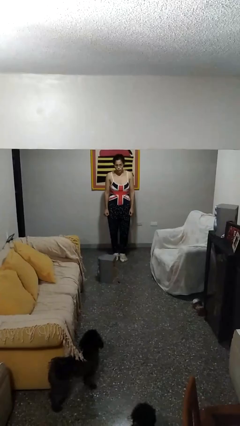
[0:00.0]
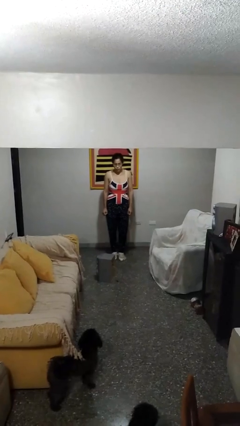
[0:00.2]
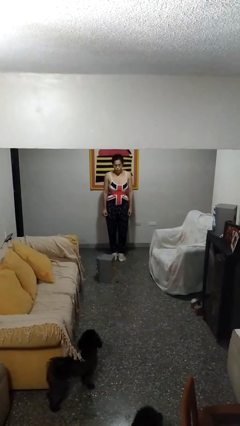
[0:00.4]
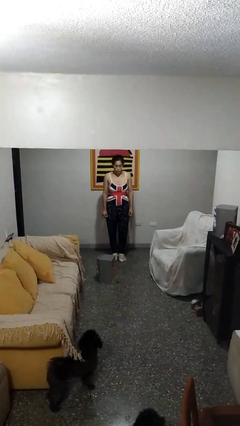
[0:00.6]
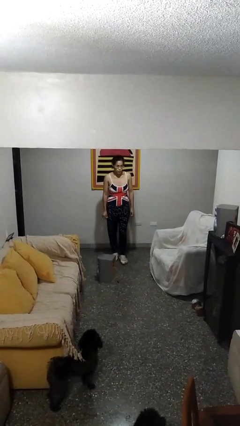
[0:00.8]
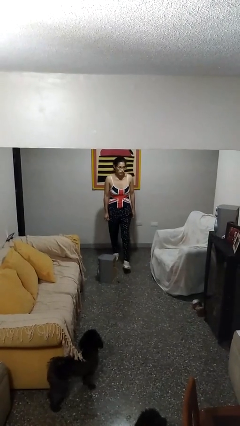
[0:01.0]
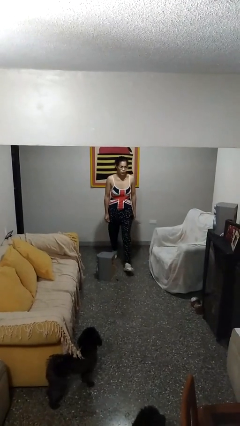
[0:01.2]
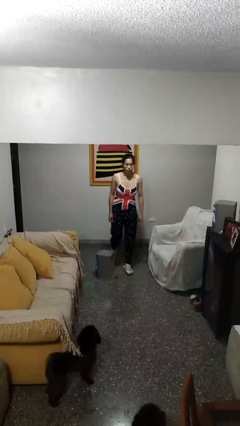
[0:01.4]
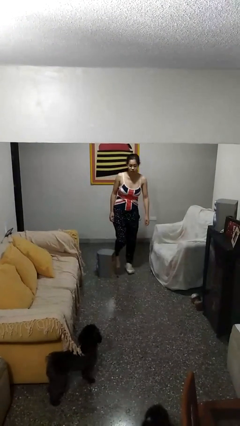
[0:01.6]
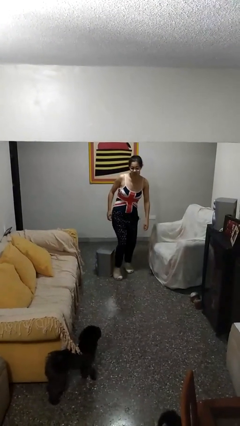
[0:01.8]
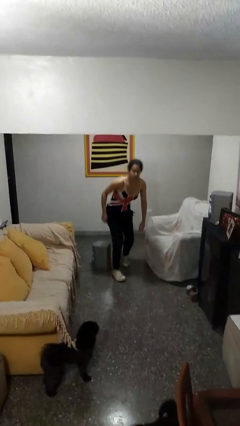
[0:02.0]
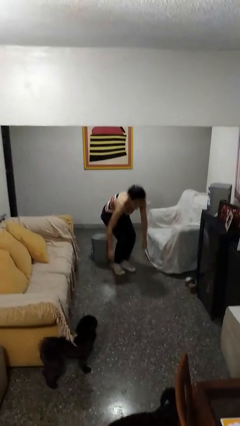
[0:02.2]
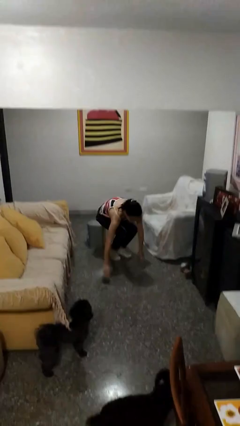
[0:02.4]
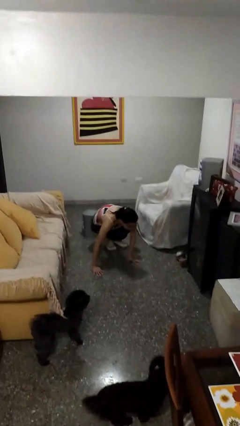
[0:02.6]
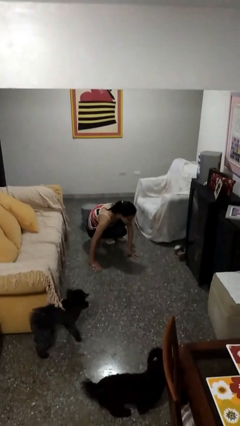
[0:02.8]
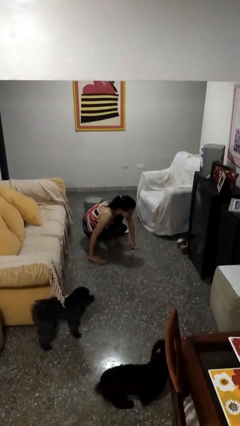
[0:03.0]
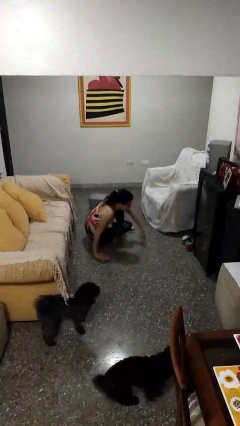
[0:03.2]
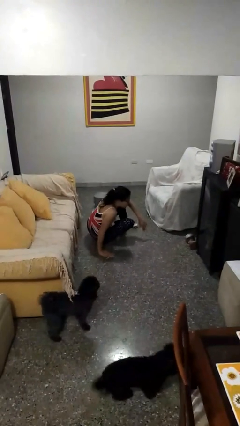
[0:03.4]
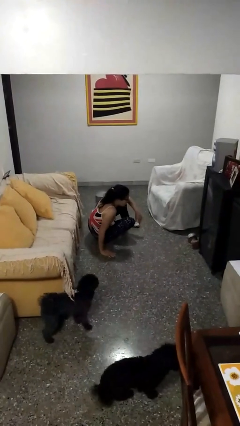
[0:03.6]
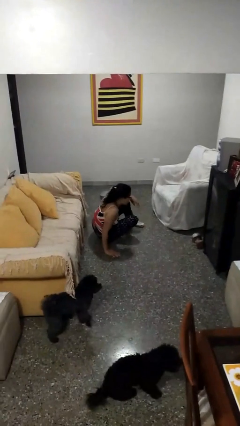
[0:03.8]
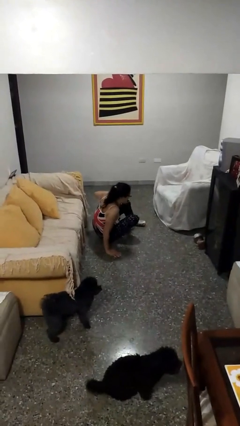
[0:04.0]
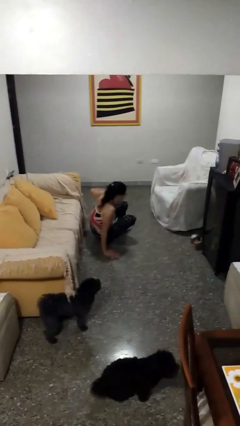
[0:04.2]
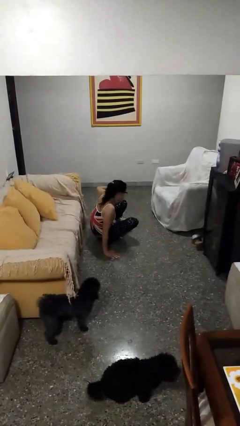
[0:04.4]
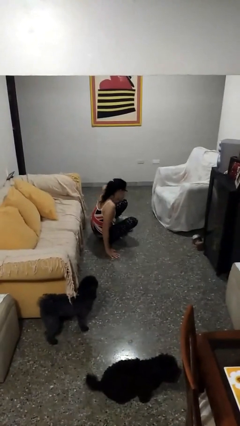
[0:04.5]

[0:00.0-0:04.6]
person trips on object on floor

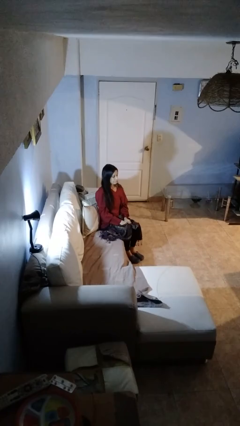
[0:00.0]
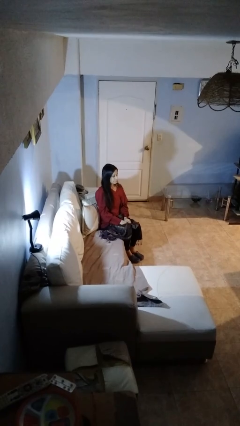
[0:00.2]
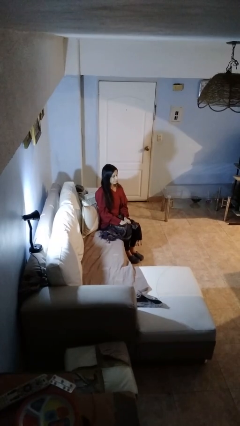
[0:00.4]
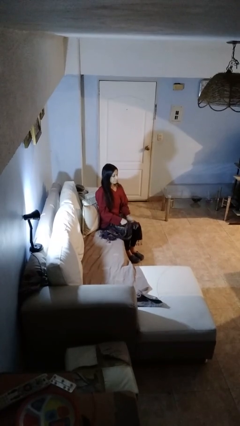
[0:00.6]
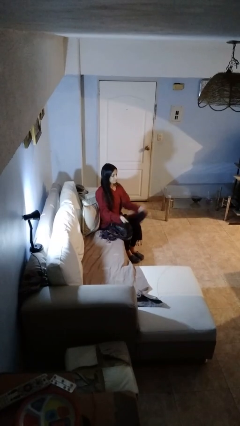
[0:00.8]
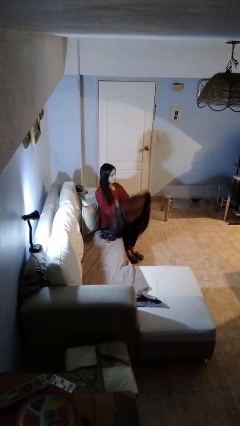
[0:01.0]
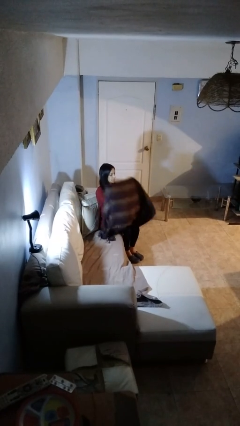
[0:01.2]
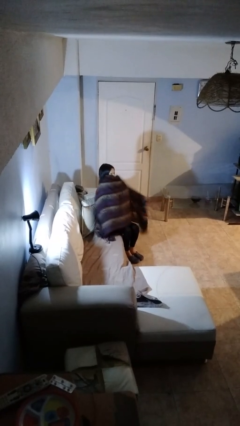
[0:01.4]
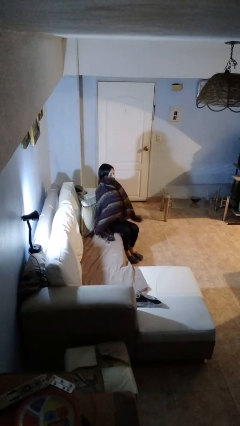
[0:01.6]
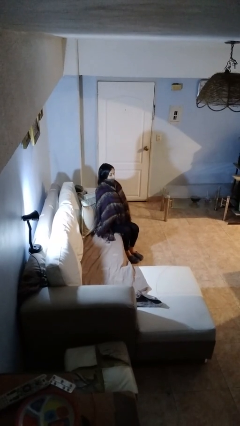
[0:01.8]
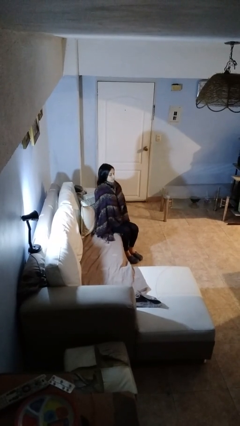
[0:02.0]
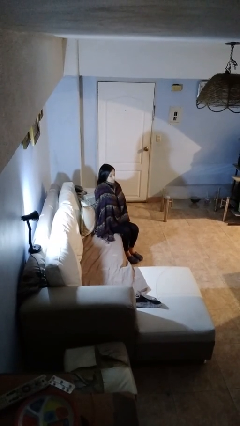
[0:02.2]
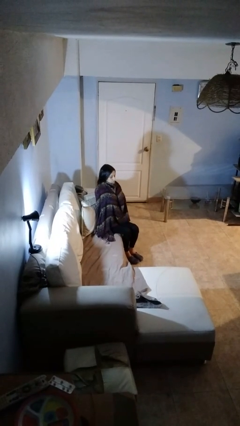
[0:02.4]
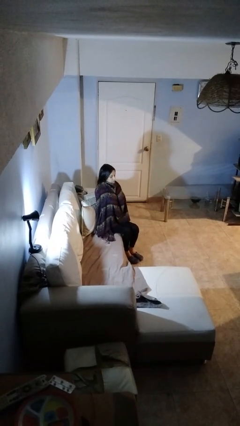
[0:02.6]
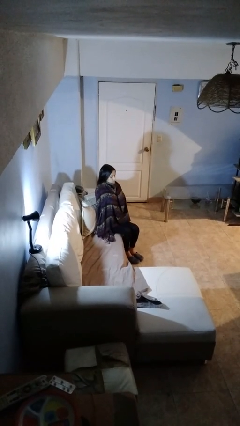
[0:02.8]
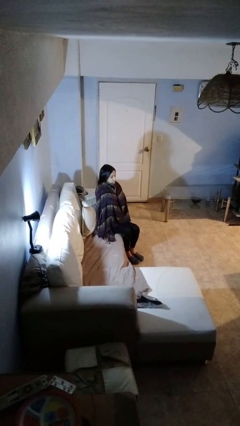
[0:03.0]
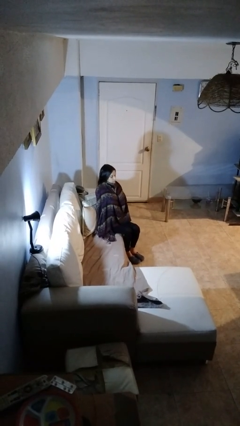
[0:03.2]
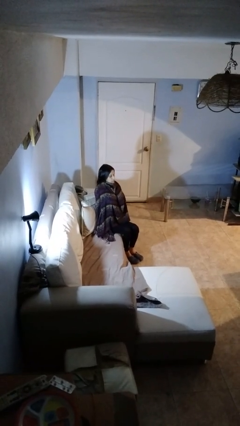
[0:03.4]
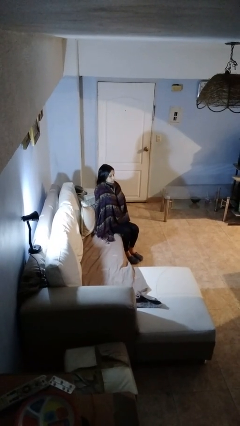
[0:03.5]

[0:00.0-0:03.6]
person covers with blanket

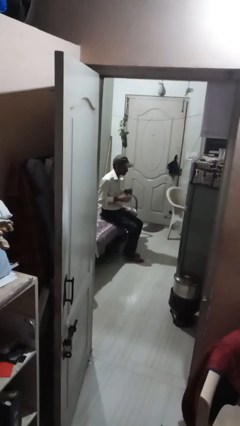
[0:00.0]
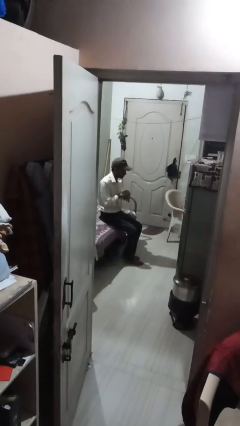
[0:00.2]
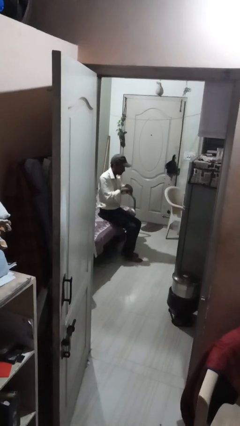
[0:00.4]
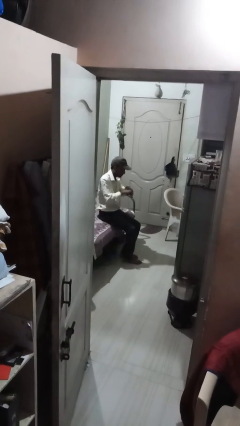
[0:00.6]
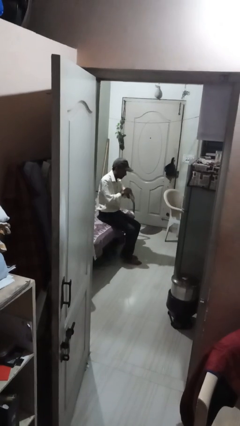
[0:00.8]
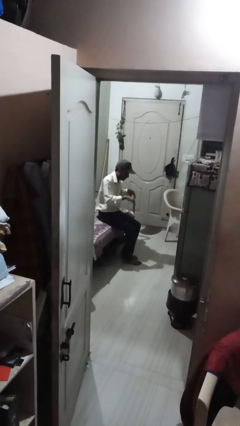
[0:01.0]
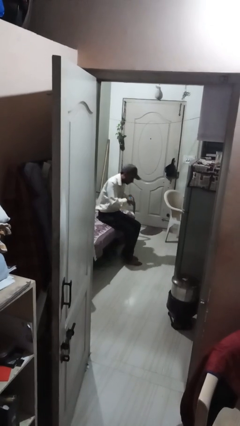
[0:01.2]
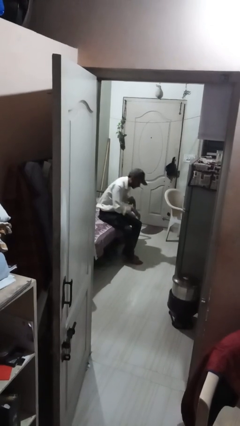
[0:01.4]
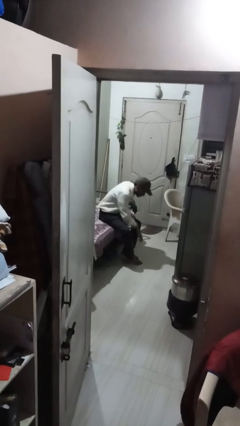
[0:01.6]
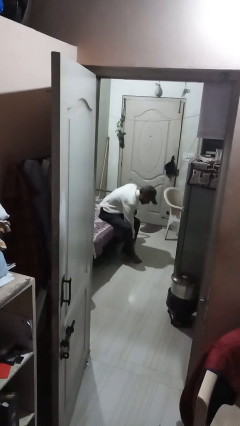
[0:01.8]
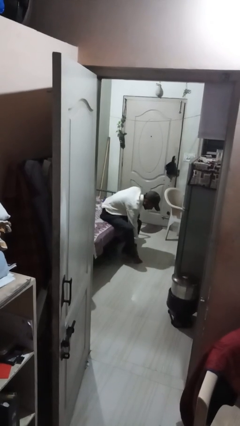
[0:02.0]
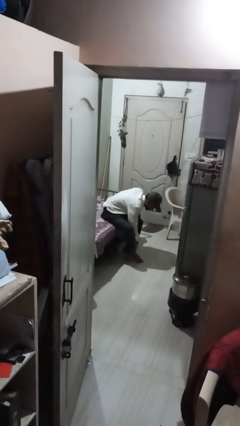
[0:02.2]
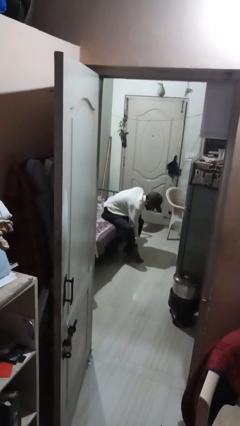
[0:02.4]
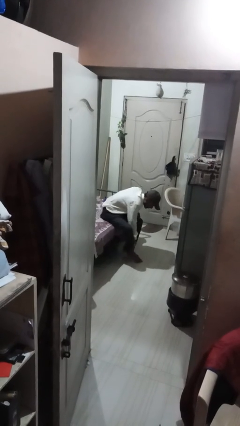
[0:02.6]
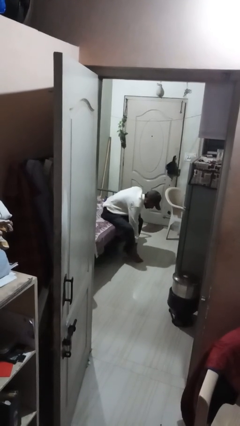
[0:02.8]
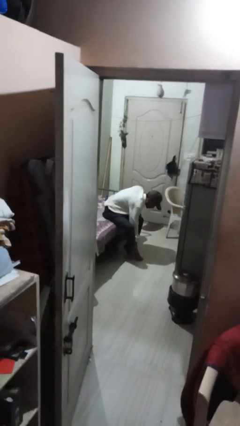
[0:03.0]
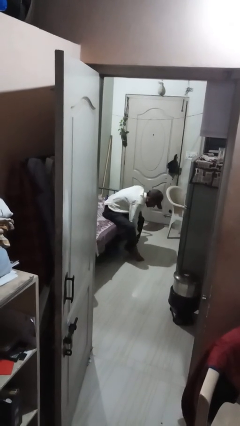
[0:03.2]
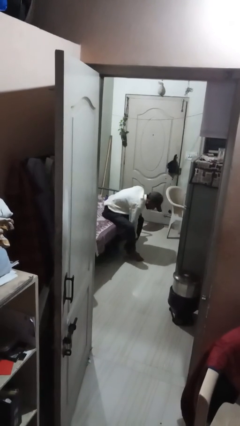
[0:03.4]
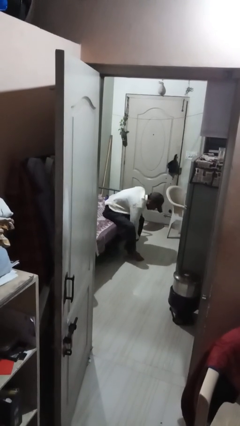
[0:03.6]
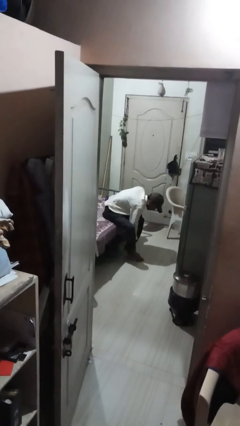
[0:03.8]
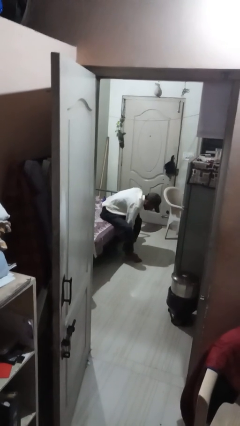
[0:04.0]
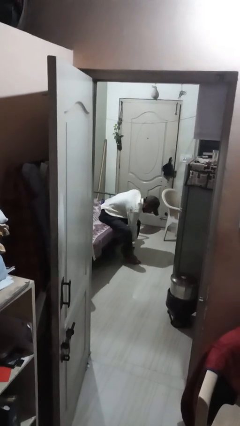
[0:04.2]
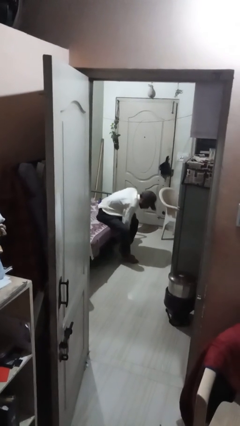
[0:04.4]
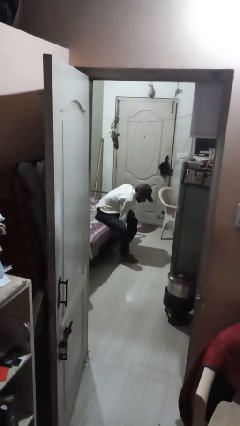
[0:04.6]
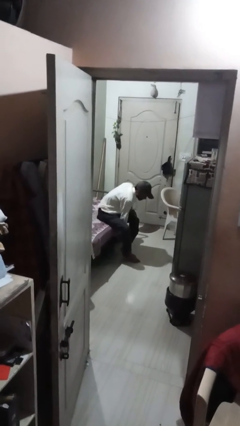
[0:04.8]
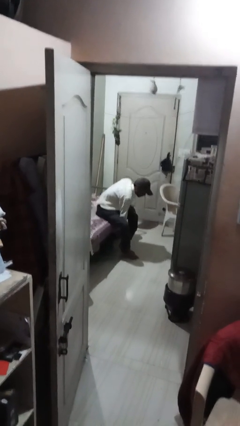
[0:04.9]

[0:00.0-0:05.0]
person applies facial moisturizer

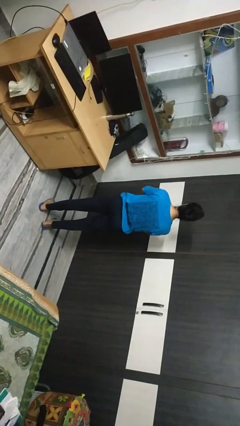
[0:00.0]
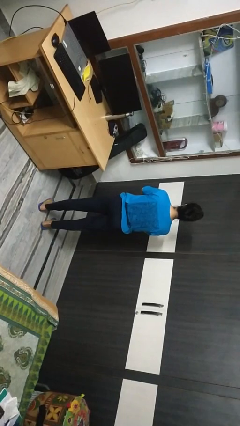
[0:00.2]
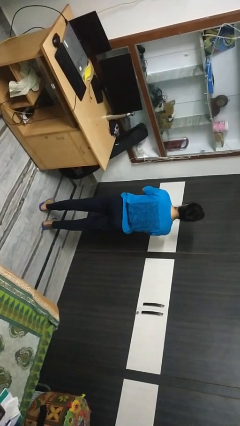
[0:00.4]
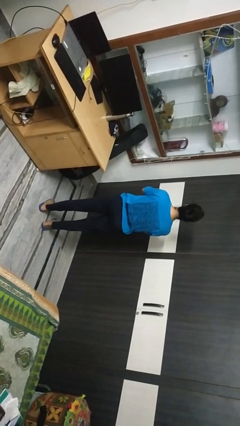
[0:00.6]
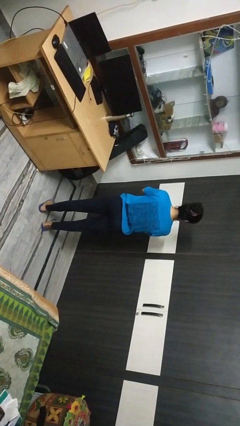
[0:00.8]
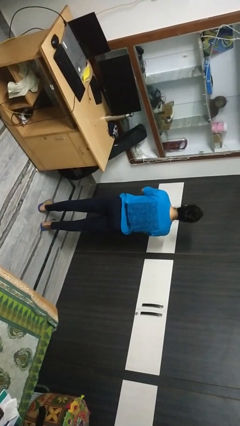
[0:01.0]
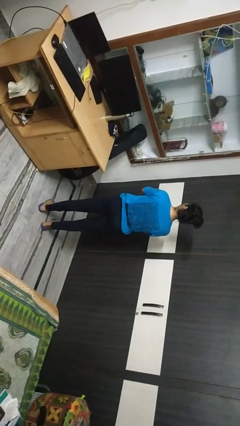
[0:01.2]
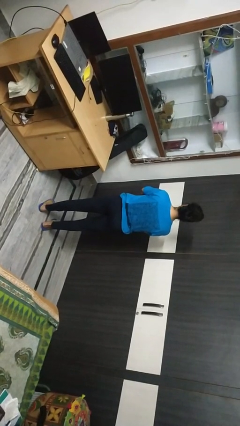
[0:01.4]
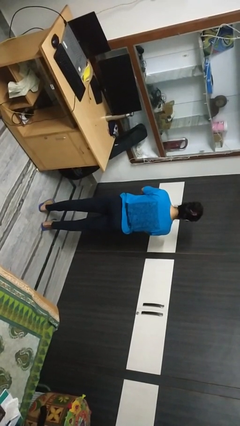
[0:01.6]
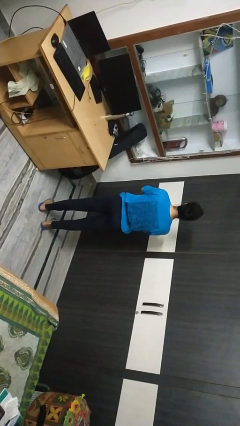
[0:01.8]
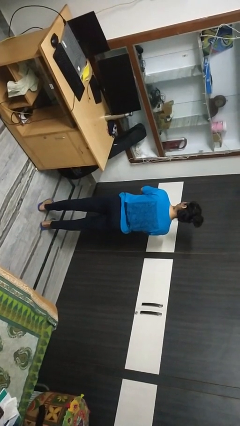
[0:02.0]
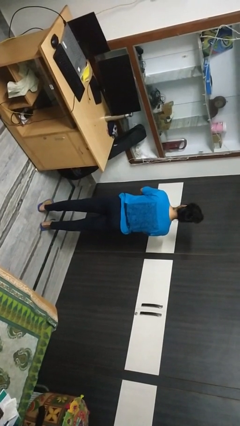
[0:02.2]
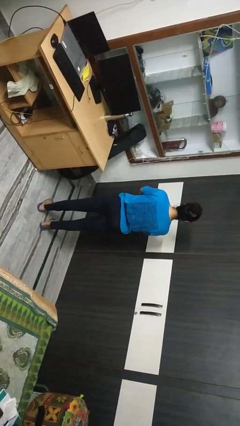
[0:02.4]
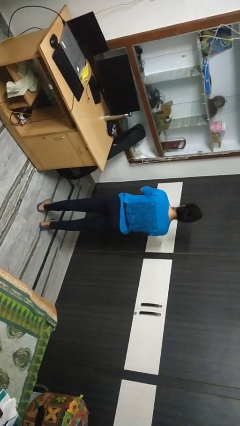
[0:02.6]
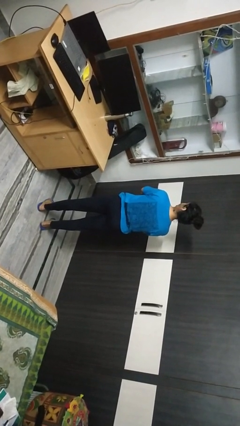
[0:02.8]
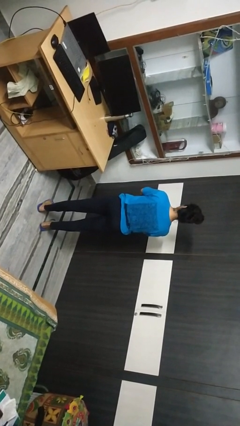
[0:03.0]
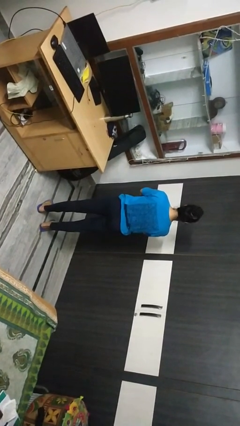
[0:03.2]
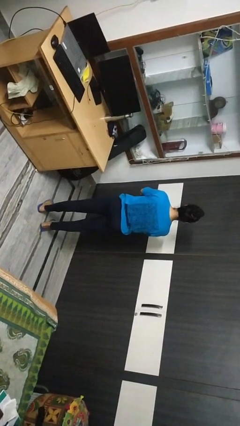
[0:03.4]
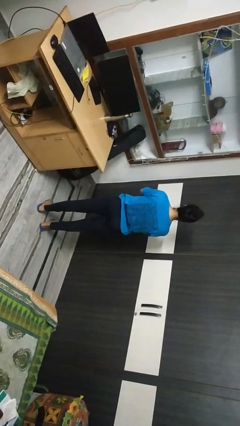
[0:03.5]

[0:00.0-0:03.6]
person shakes head

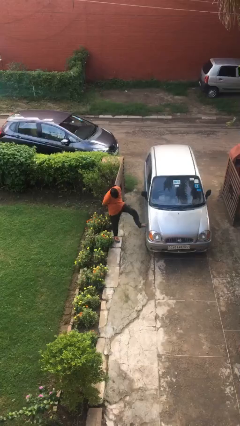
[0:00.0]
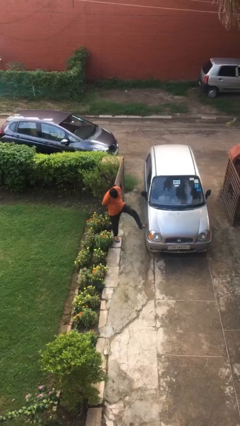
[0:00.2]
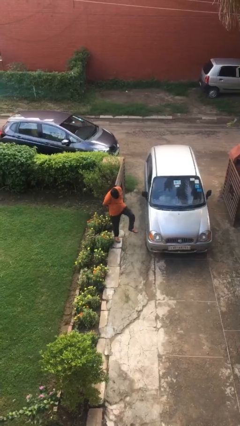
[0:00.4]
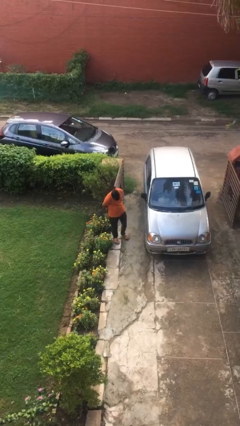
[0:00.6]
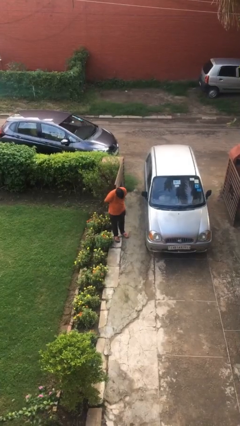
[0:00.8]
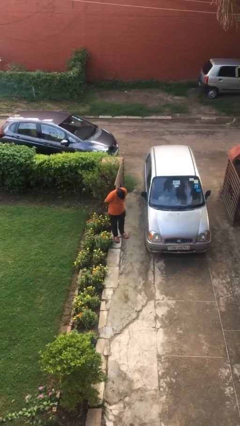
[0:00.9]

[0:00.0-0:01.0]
person kicks car tires
